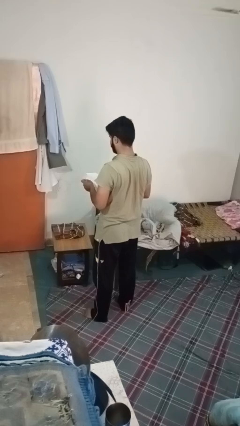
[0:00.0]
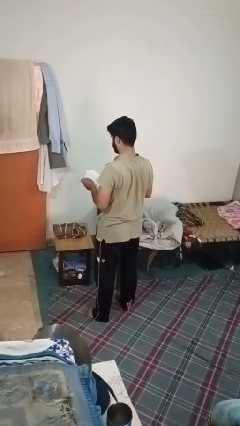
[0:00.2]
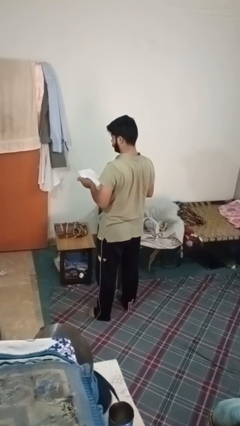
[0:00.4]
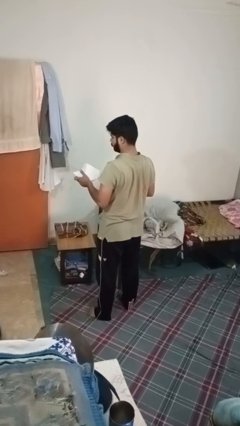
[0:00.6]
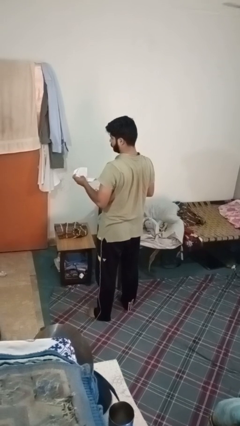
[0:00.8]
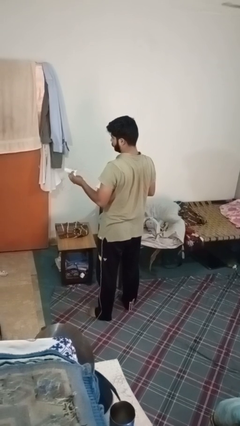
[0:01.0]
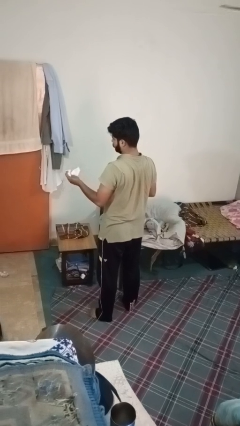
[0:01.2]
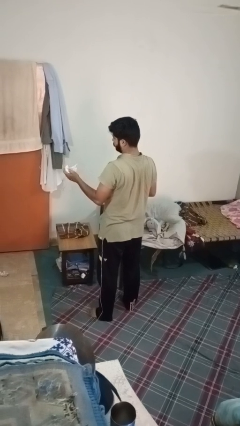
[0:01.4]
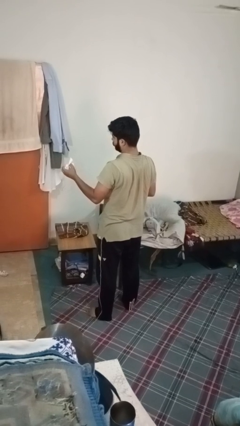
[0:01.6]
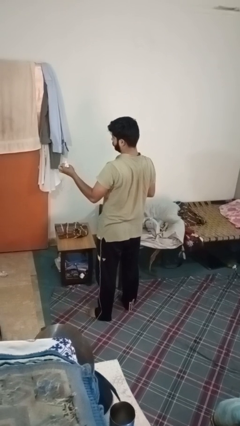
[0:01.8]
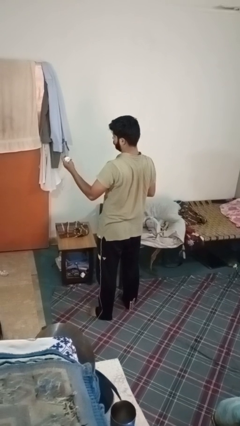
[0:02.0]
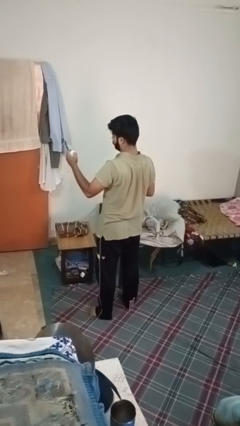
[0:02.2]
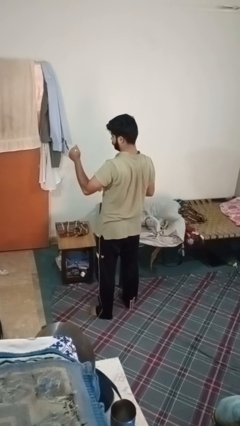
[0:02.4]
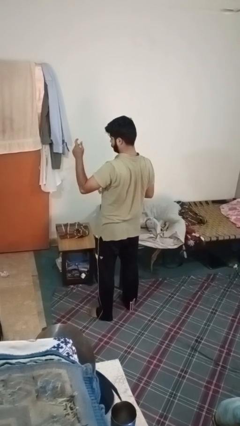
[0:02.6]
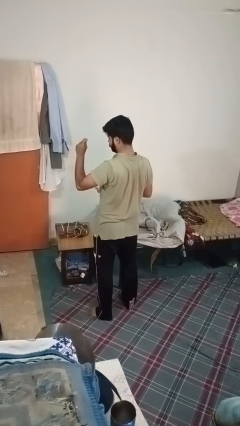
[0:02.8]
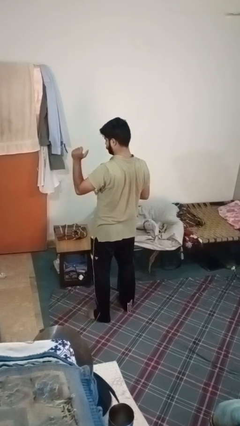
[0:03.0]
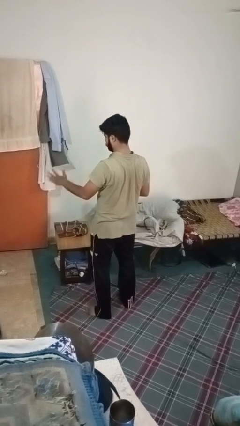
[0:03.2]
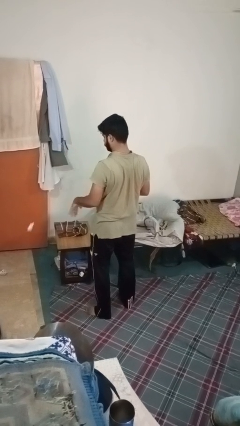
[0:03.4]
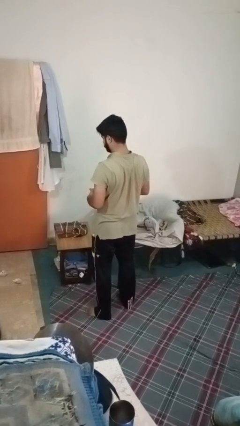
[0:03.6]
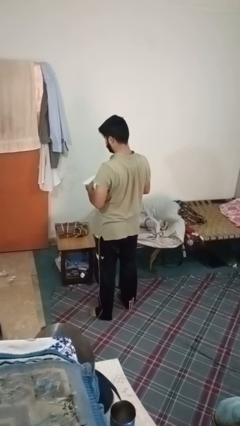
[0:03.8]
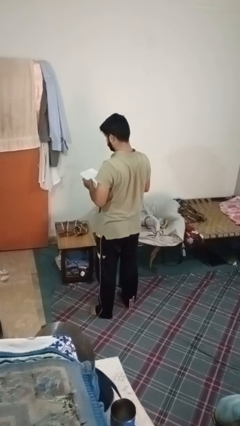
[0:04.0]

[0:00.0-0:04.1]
person crumples paper

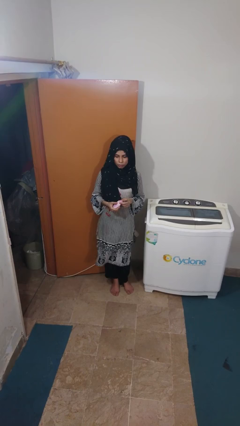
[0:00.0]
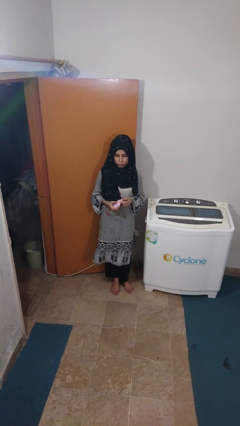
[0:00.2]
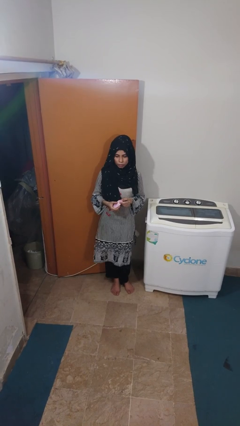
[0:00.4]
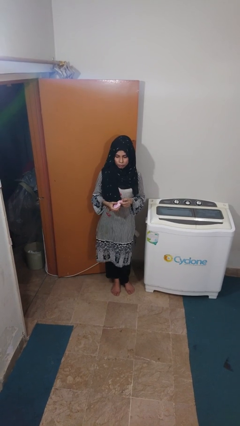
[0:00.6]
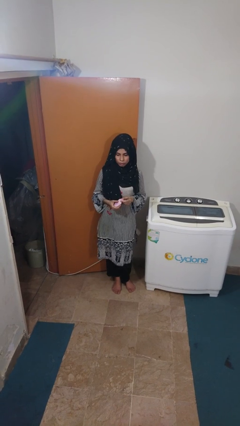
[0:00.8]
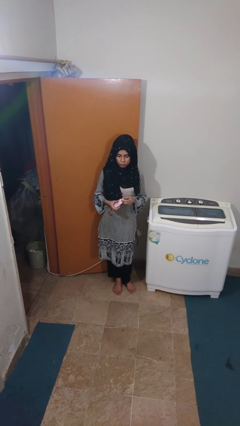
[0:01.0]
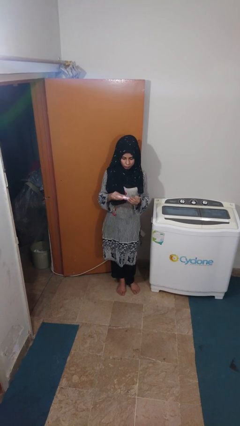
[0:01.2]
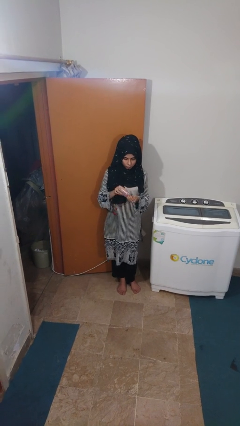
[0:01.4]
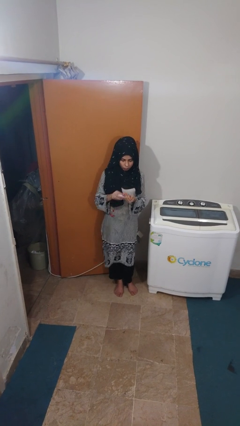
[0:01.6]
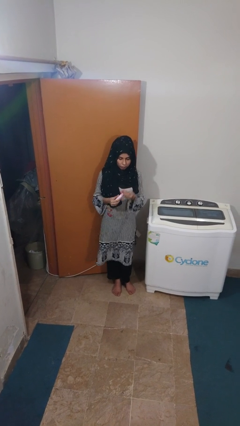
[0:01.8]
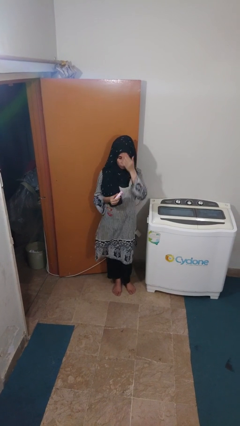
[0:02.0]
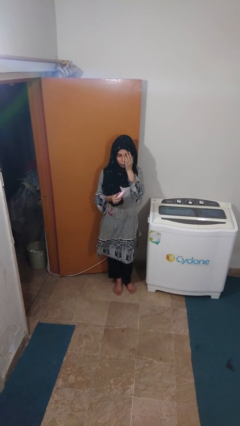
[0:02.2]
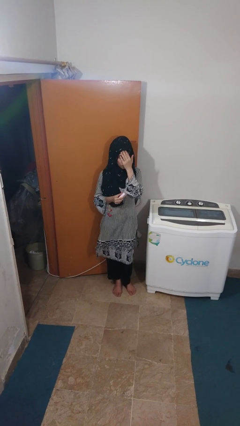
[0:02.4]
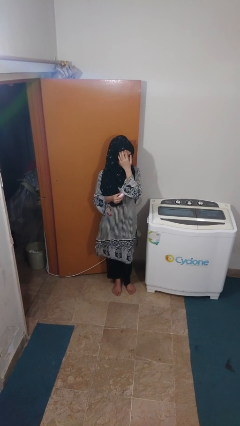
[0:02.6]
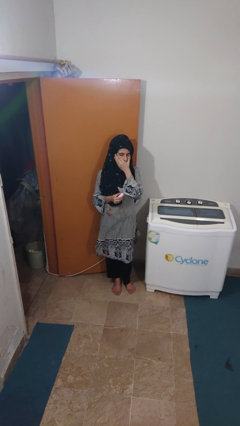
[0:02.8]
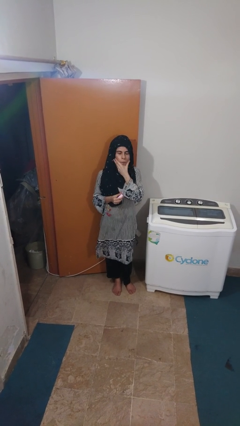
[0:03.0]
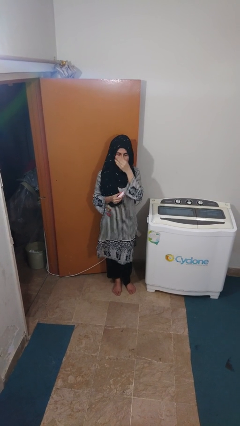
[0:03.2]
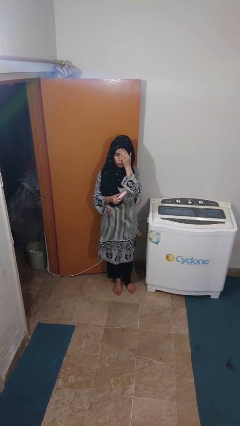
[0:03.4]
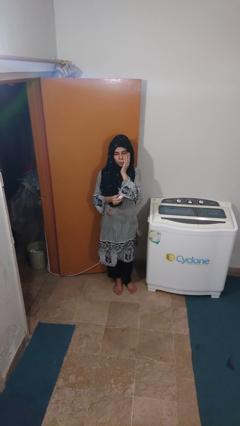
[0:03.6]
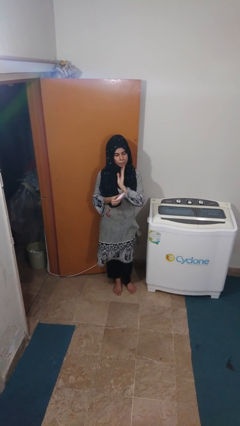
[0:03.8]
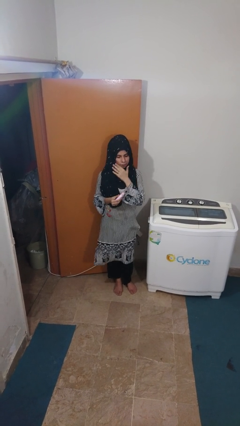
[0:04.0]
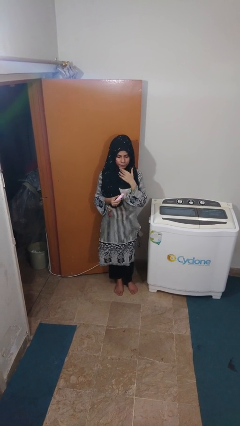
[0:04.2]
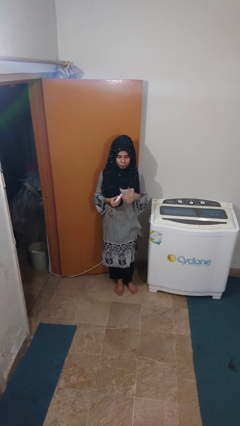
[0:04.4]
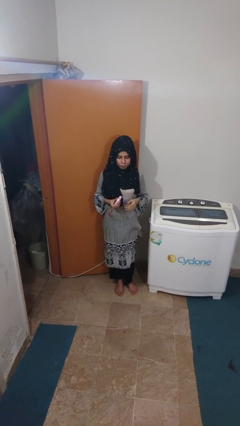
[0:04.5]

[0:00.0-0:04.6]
person applies sunscreen

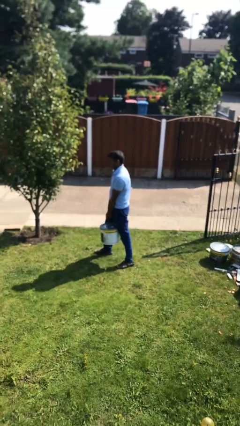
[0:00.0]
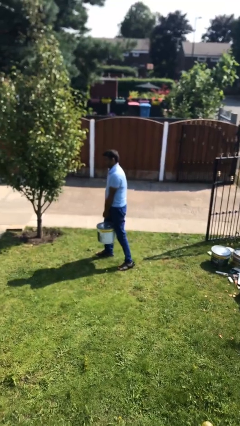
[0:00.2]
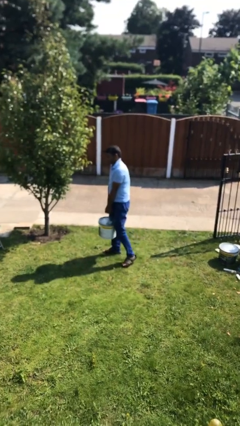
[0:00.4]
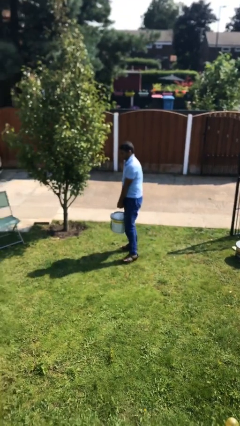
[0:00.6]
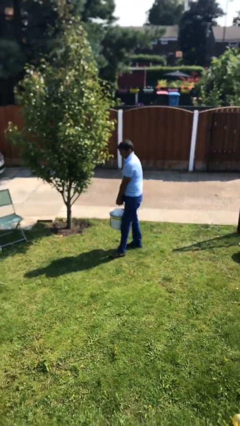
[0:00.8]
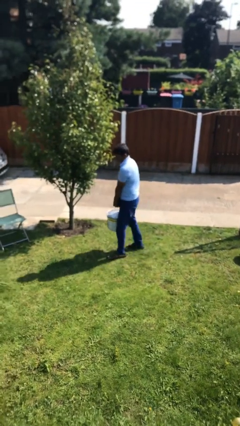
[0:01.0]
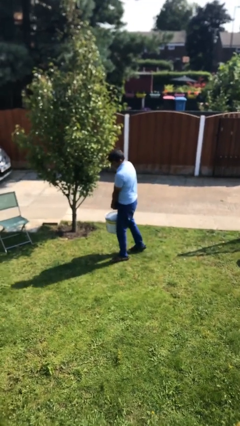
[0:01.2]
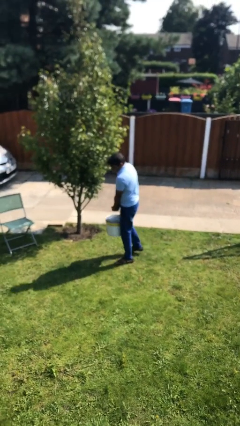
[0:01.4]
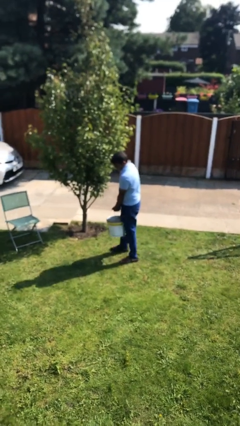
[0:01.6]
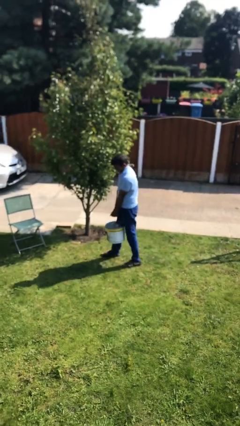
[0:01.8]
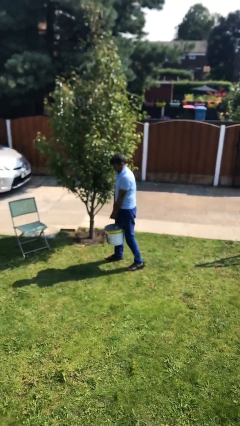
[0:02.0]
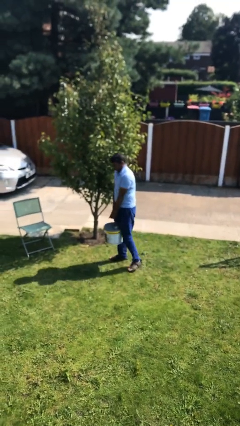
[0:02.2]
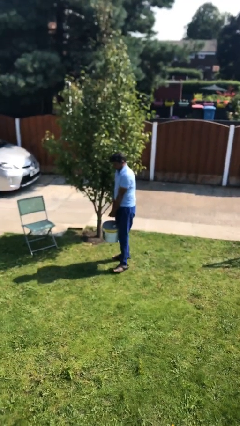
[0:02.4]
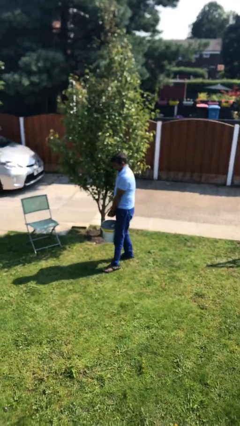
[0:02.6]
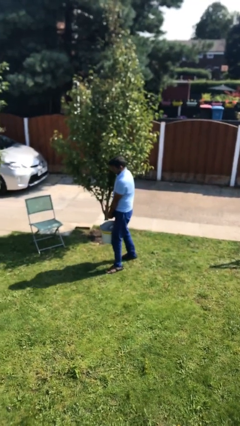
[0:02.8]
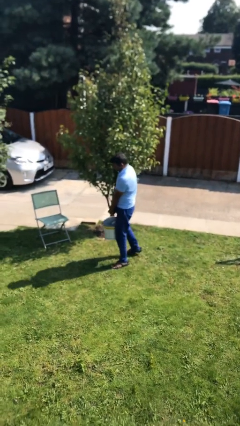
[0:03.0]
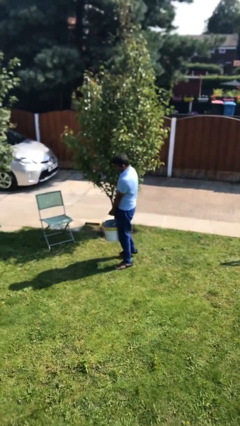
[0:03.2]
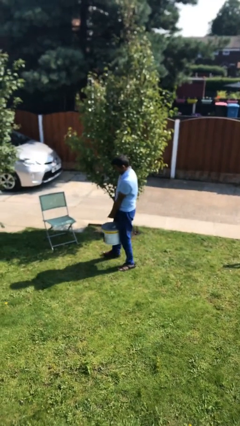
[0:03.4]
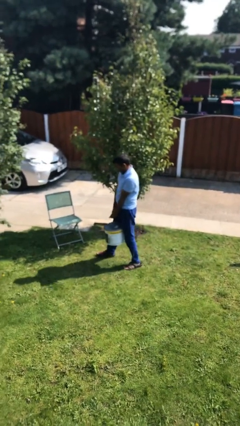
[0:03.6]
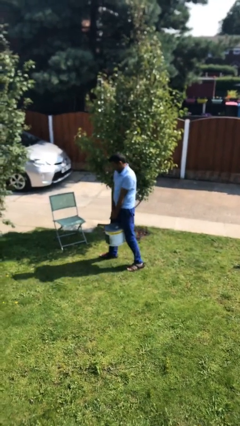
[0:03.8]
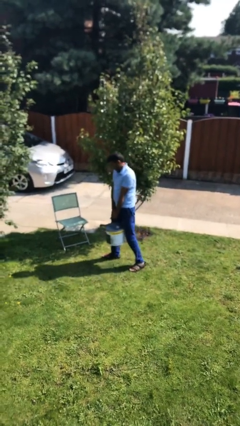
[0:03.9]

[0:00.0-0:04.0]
person carries heavy object

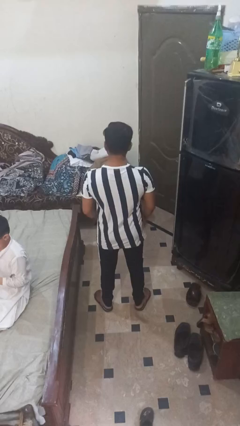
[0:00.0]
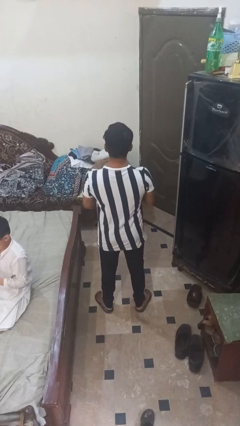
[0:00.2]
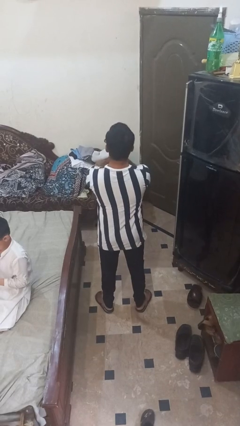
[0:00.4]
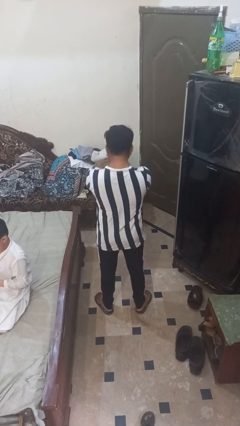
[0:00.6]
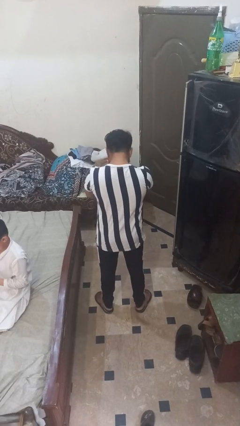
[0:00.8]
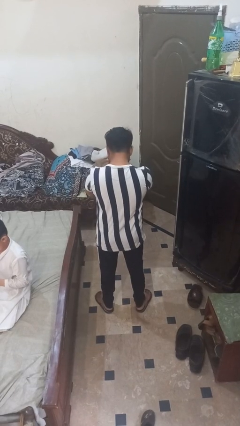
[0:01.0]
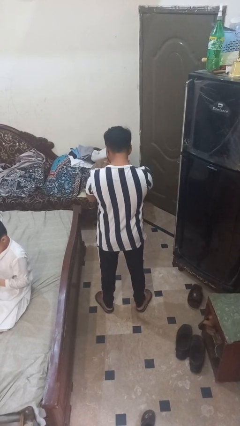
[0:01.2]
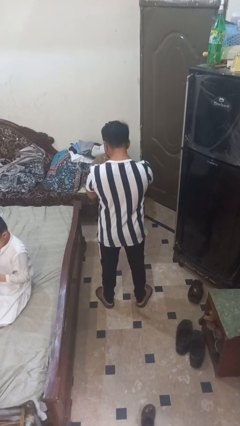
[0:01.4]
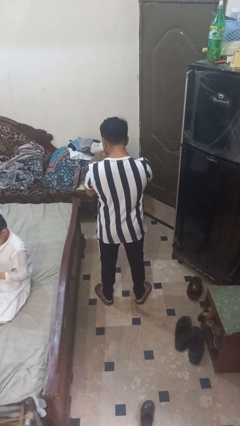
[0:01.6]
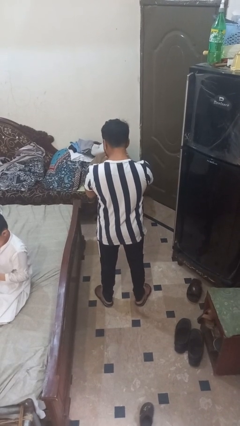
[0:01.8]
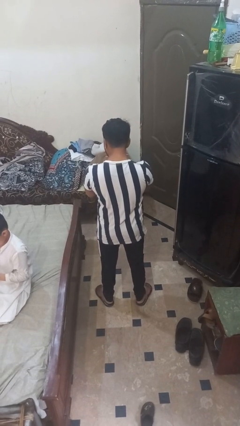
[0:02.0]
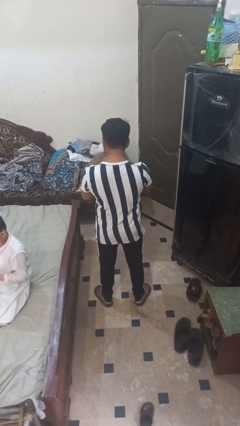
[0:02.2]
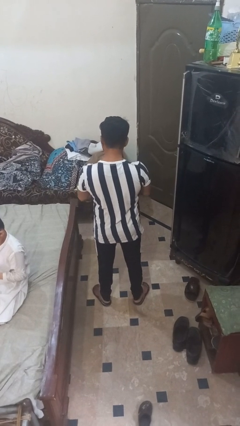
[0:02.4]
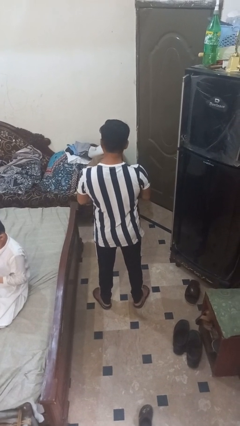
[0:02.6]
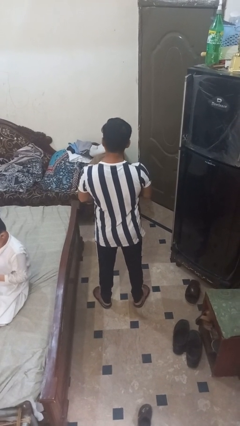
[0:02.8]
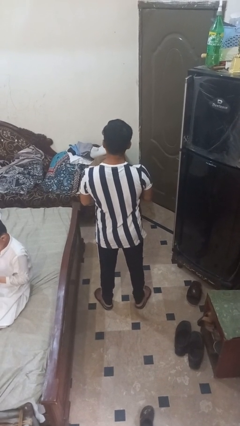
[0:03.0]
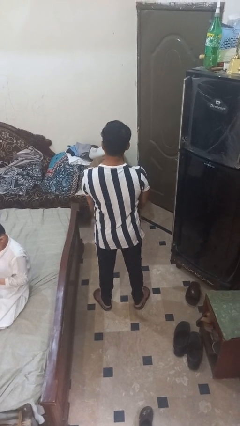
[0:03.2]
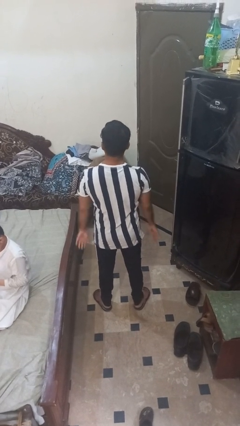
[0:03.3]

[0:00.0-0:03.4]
person sneezes into hand

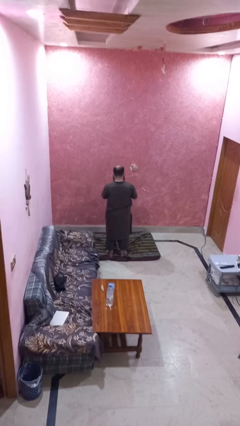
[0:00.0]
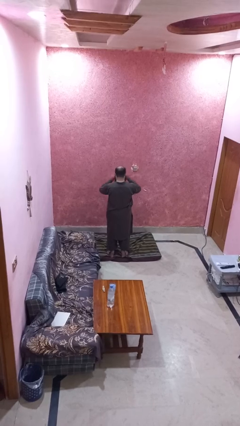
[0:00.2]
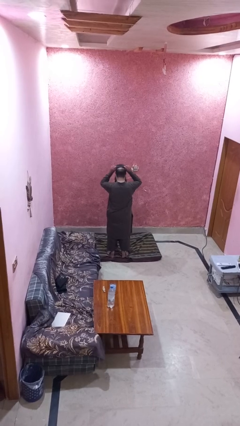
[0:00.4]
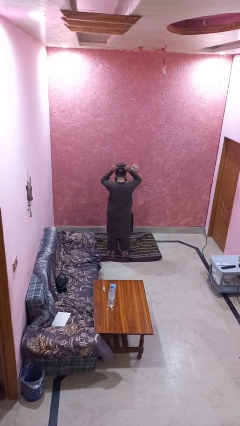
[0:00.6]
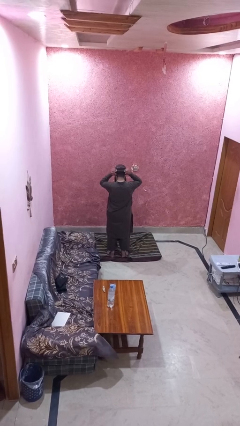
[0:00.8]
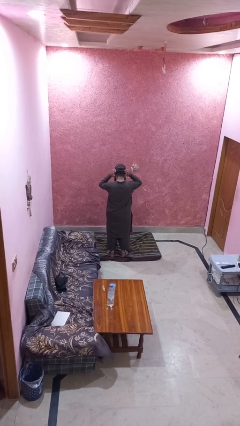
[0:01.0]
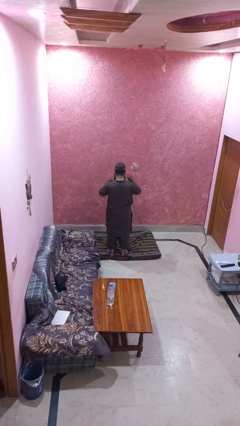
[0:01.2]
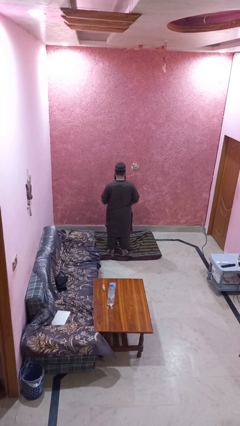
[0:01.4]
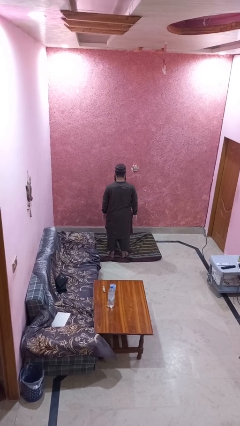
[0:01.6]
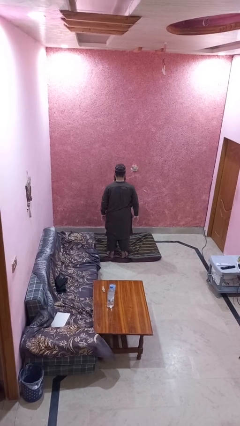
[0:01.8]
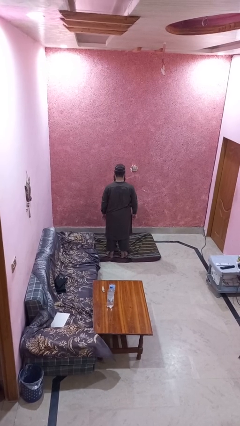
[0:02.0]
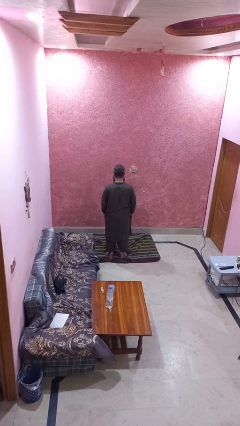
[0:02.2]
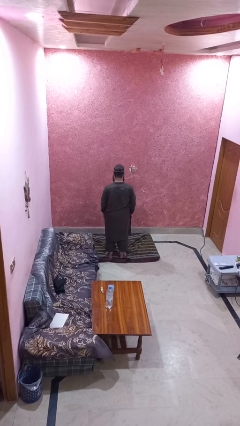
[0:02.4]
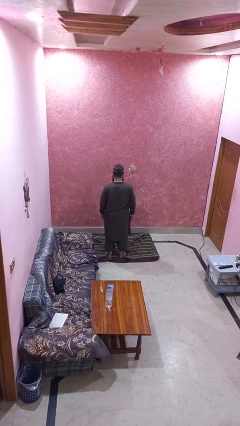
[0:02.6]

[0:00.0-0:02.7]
person puts on hat
